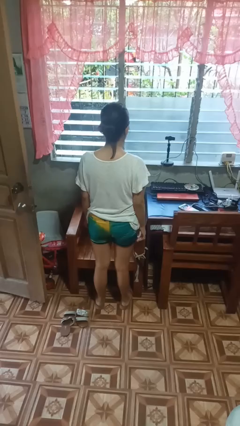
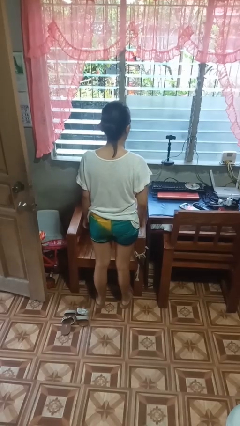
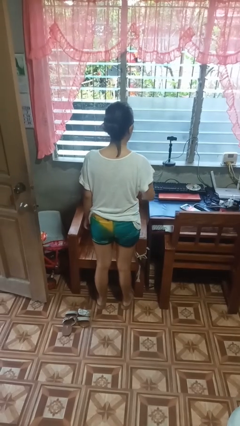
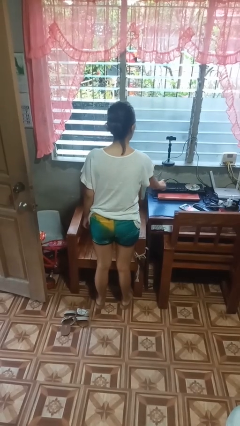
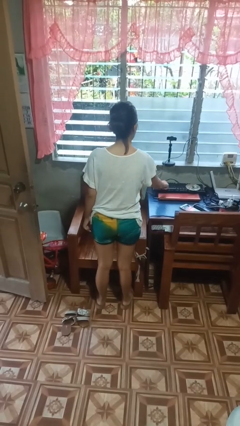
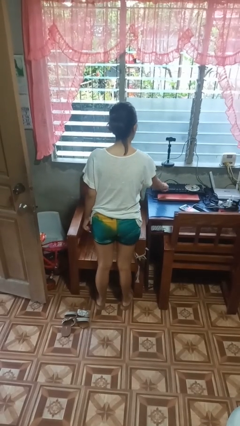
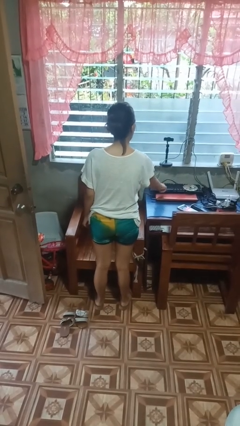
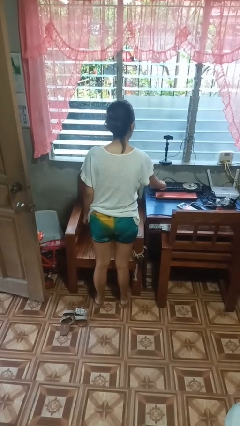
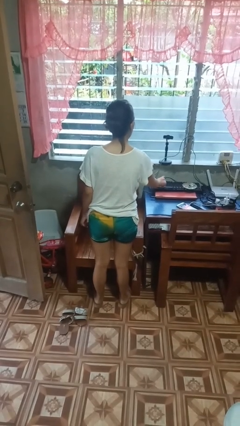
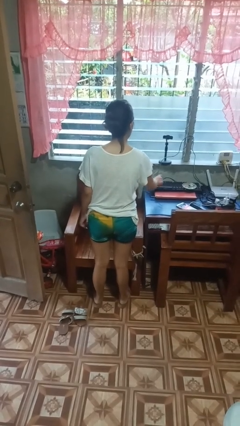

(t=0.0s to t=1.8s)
person taps object with finger

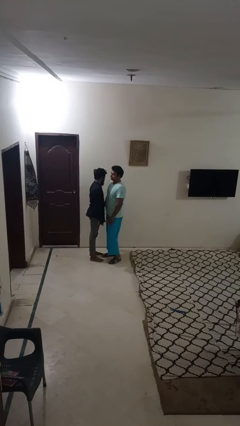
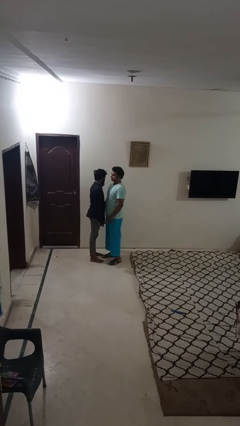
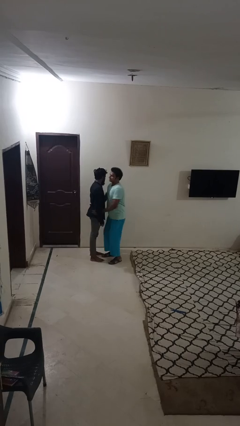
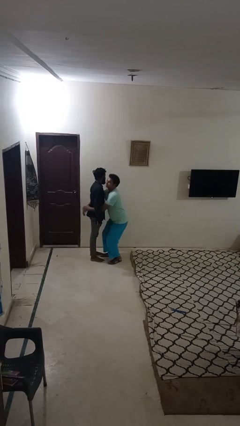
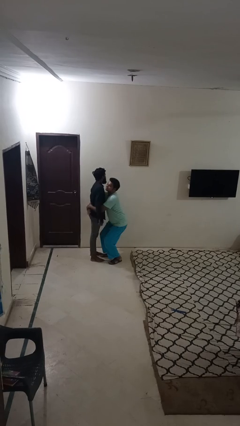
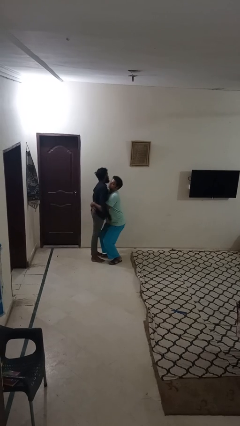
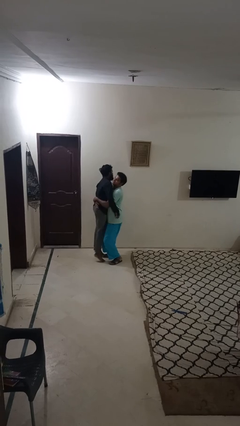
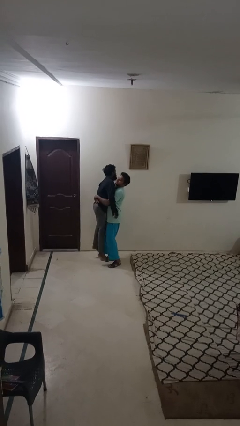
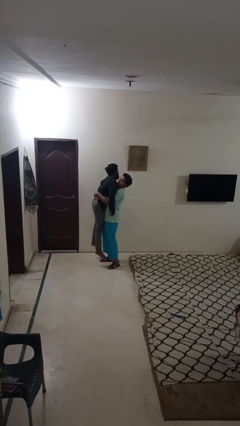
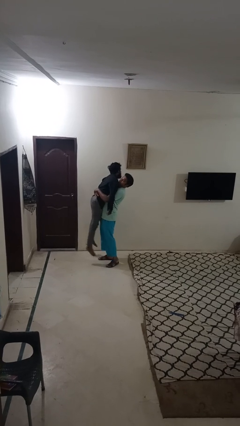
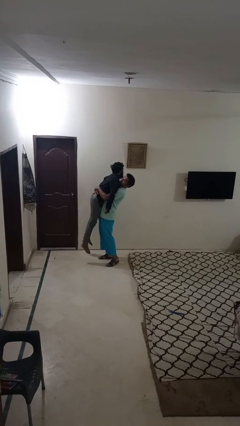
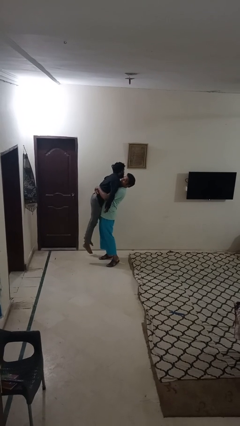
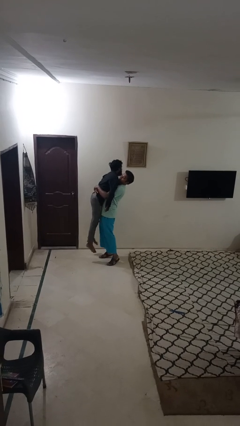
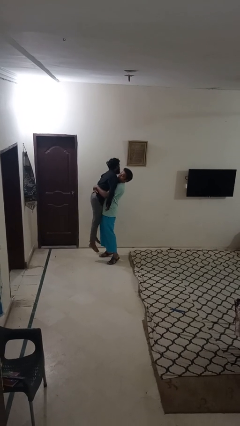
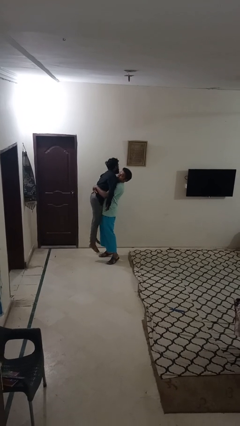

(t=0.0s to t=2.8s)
person picks up person

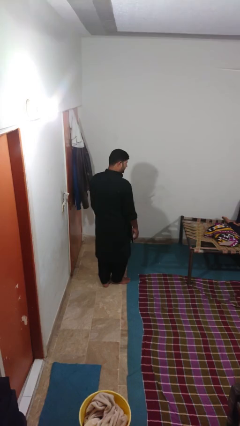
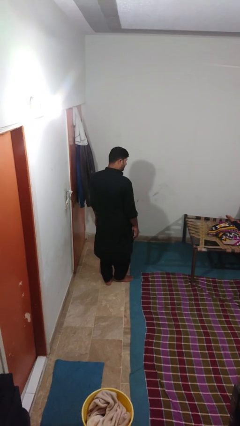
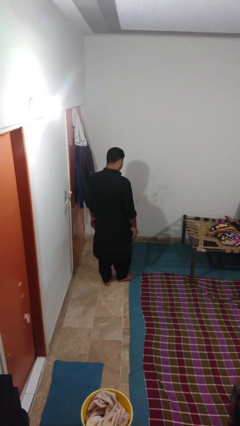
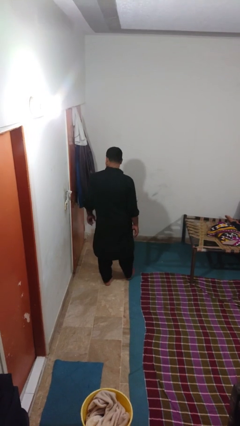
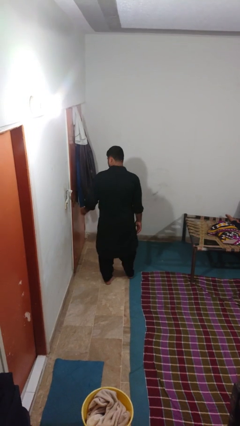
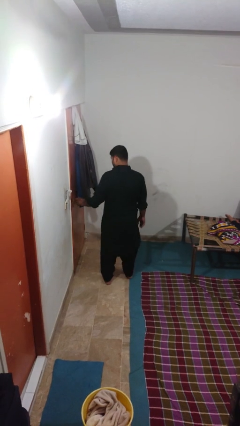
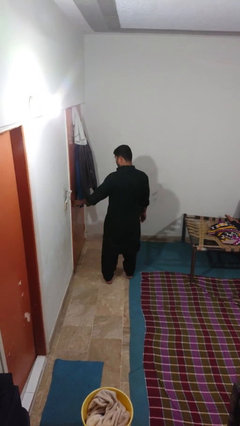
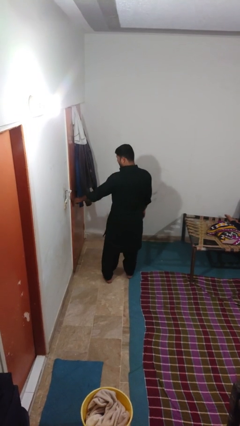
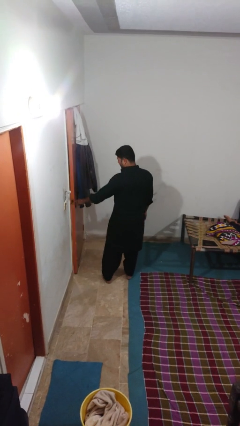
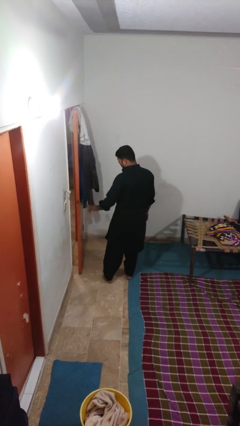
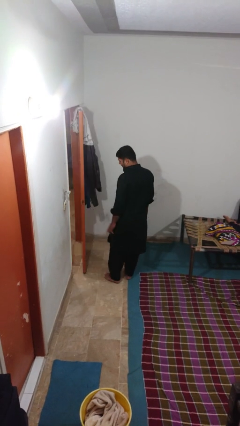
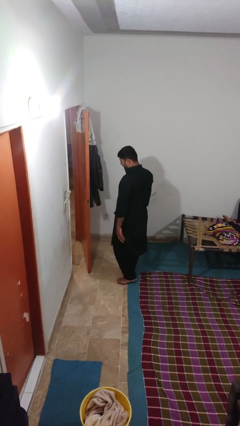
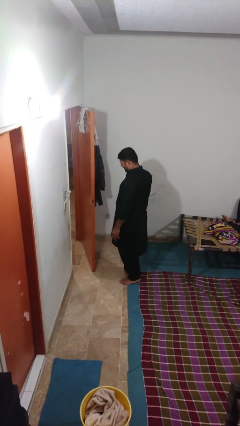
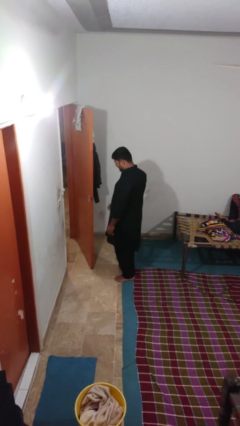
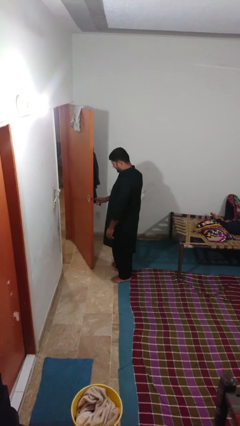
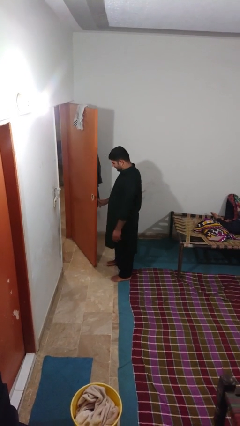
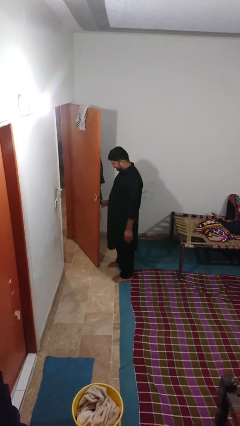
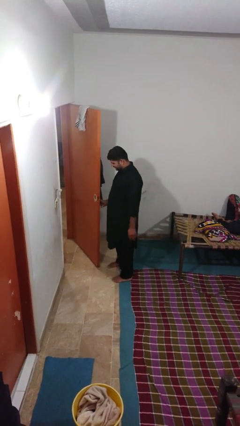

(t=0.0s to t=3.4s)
person opens facility door

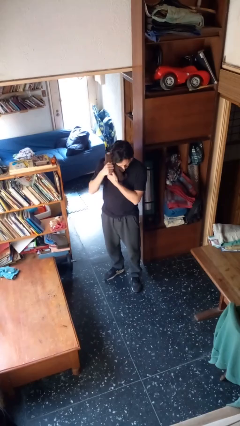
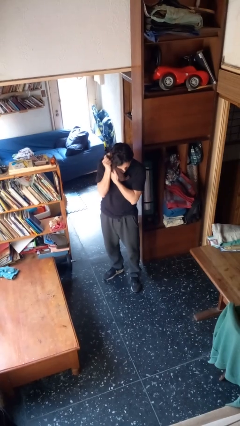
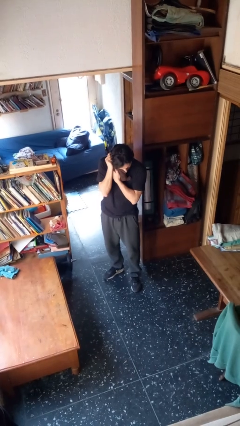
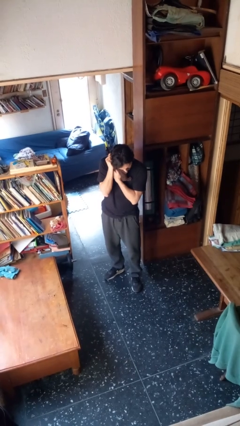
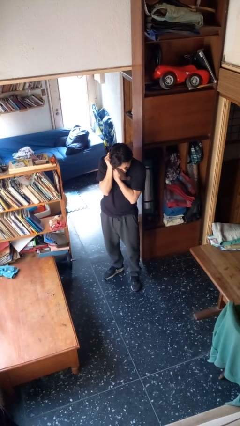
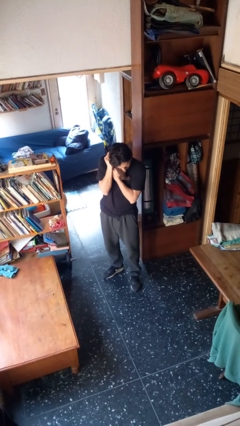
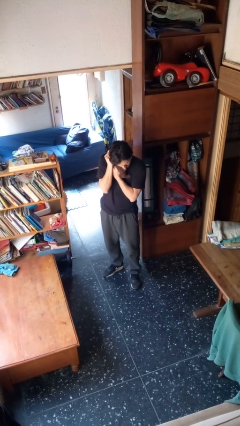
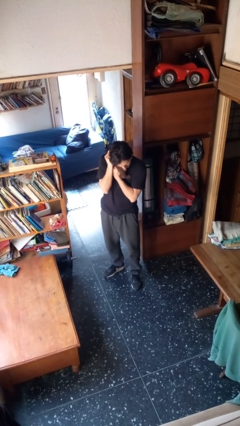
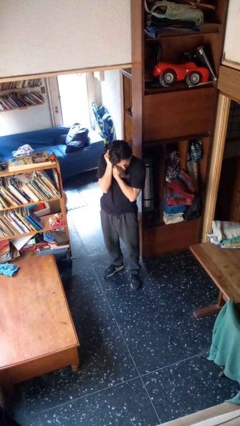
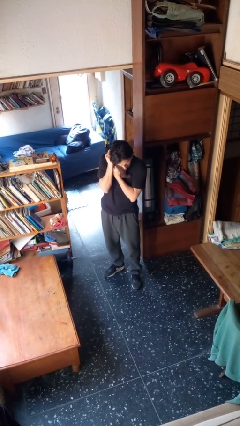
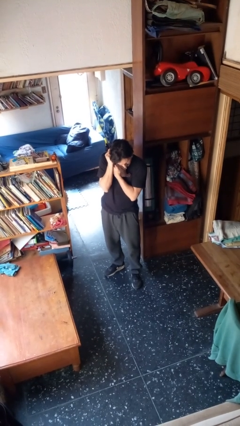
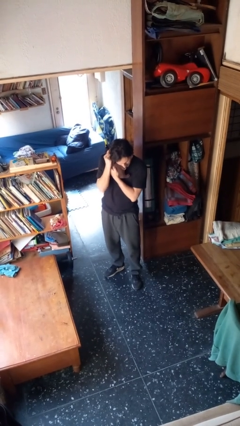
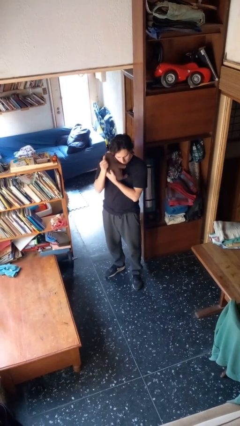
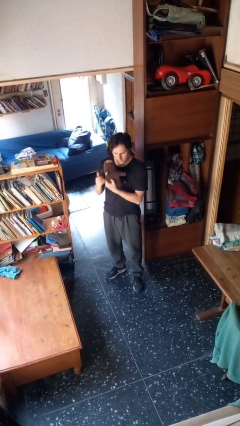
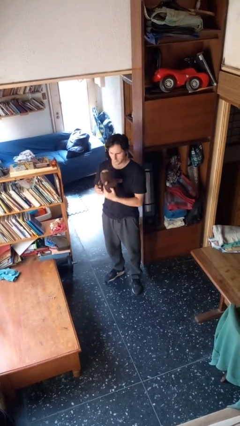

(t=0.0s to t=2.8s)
person hugs stuffed animal

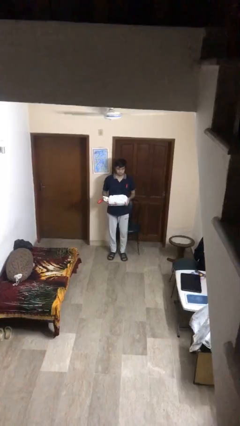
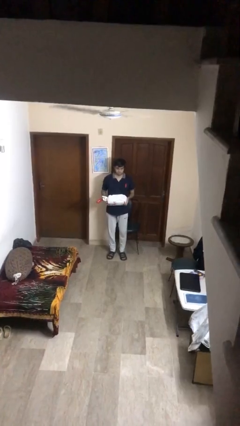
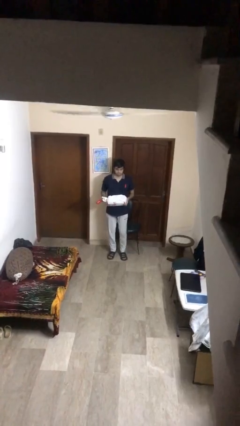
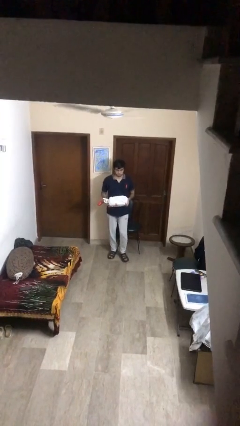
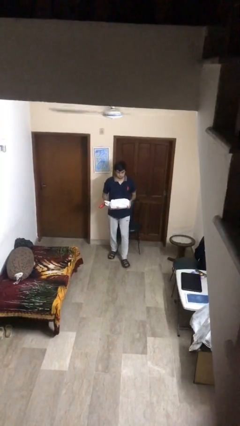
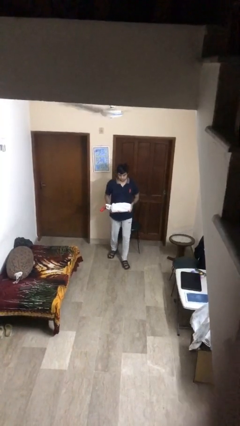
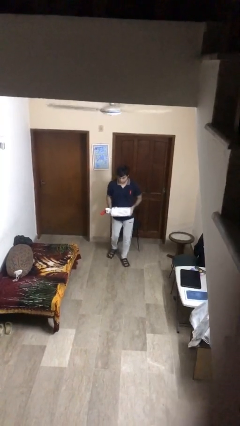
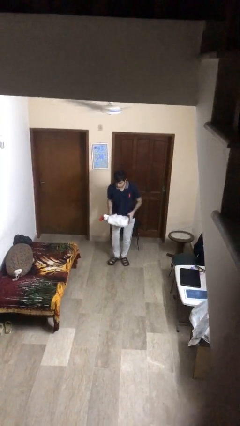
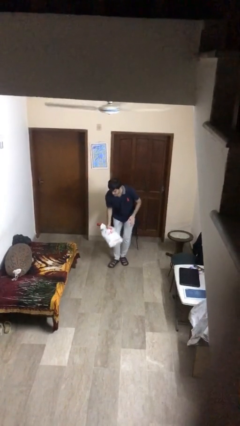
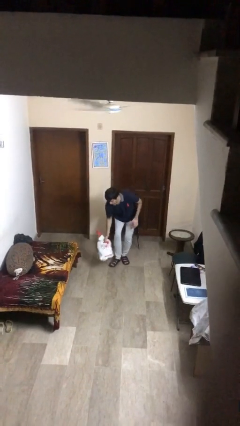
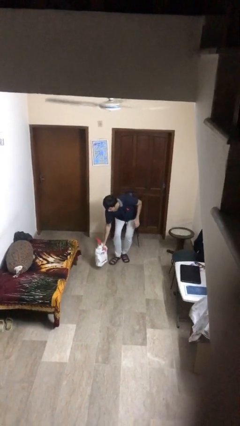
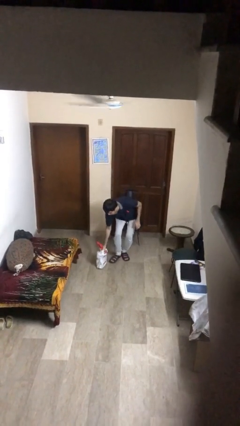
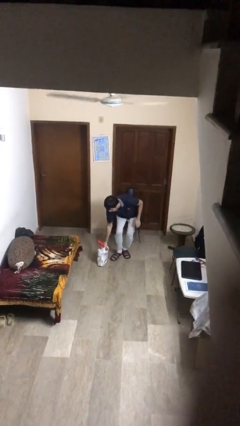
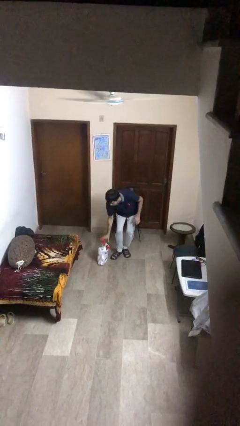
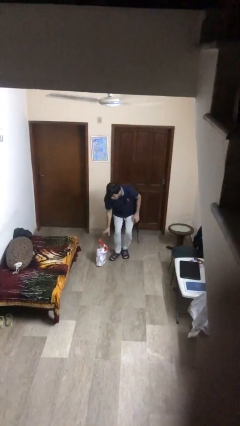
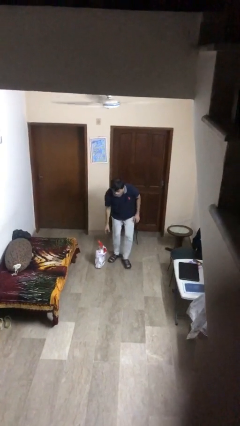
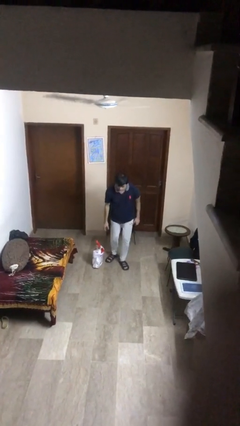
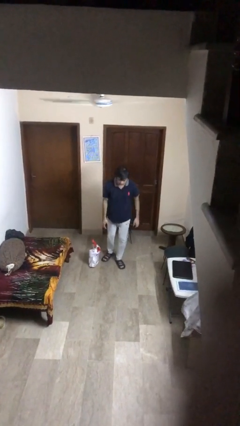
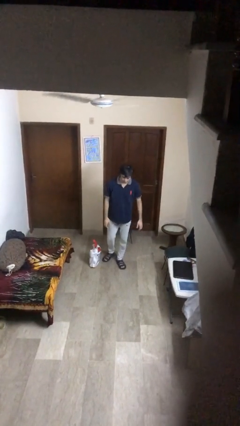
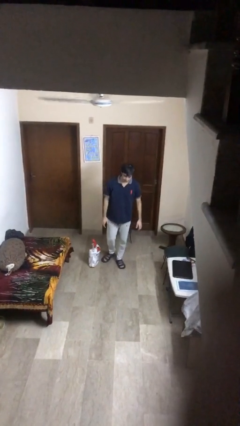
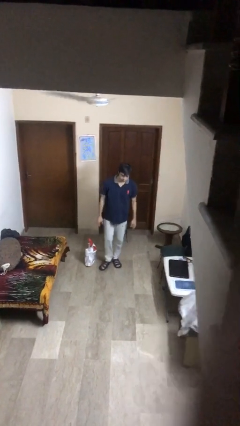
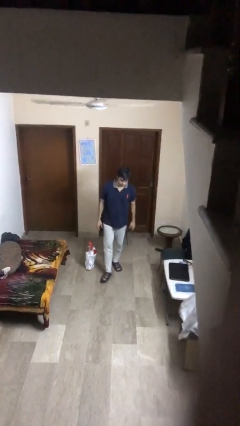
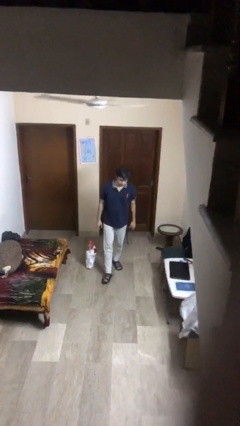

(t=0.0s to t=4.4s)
person puts down object on floor

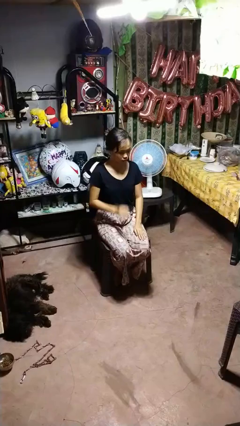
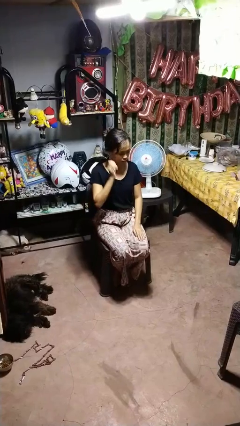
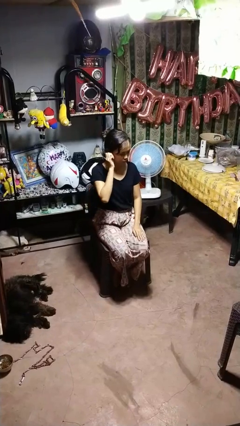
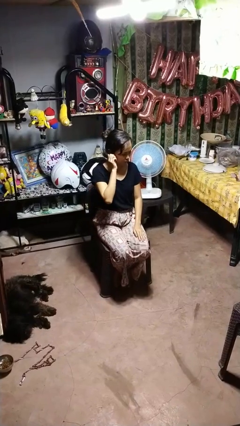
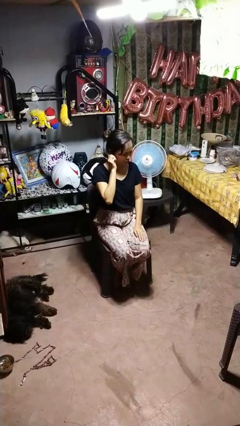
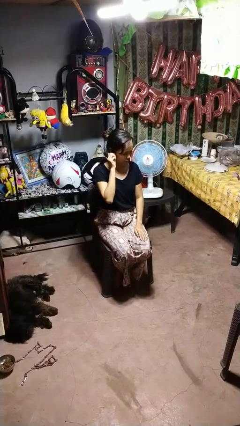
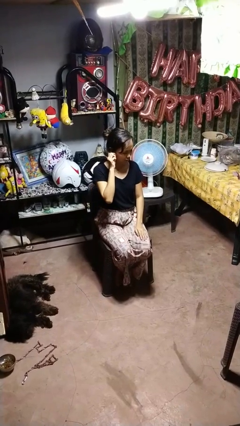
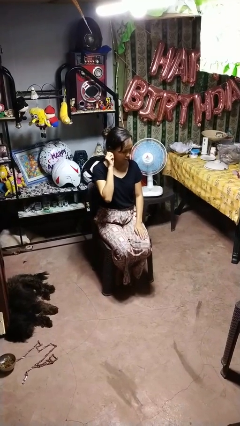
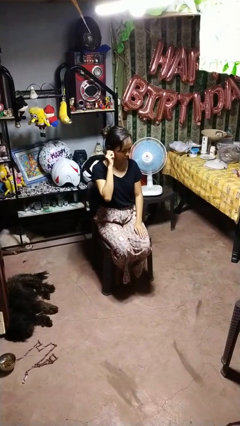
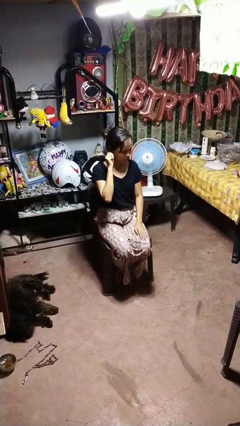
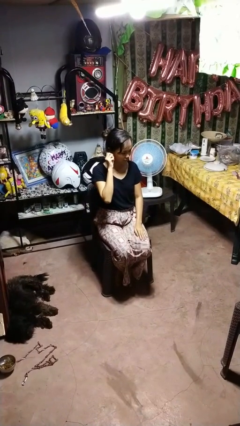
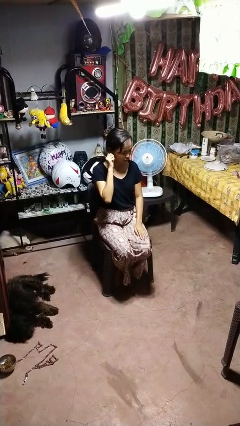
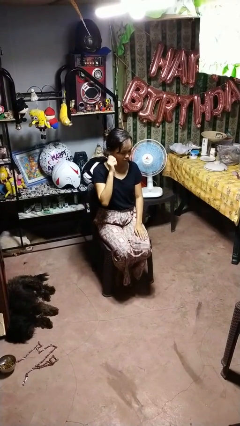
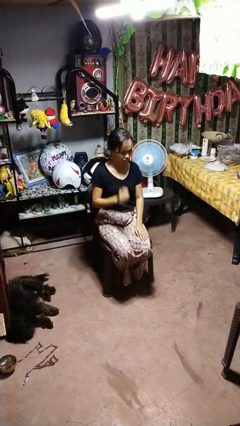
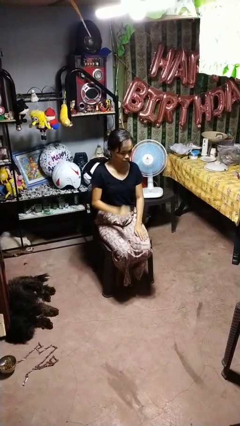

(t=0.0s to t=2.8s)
person touches earlobe
